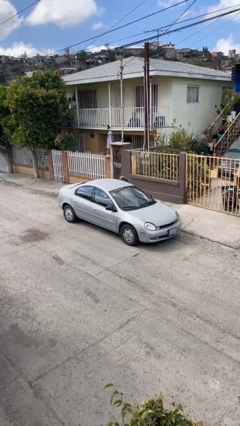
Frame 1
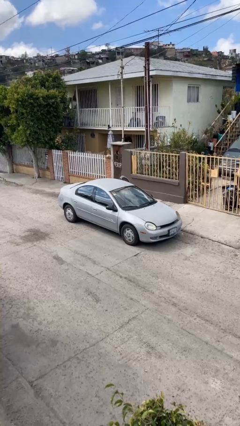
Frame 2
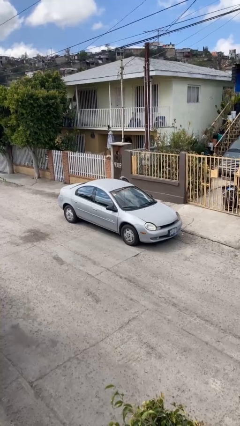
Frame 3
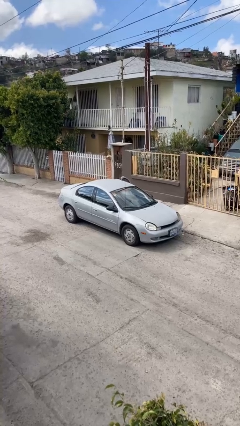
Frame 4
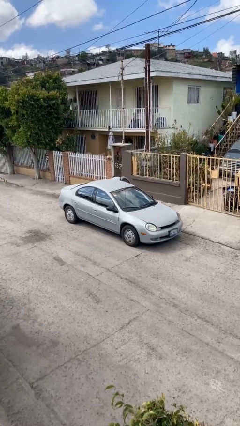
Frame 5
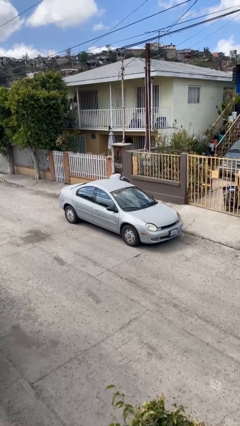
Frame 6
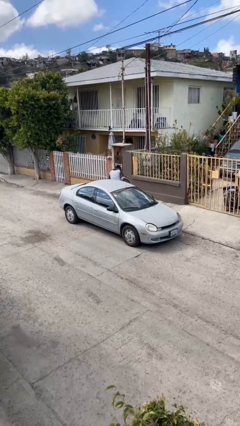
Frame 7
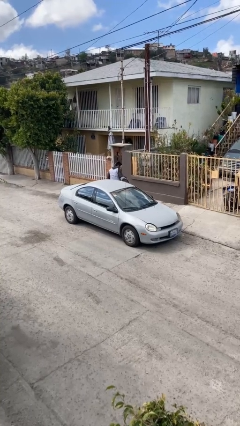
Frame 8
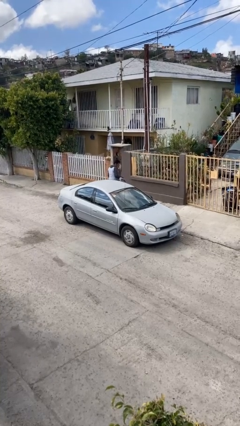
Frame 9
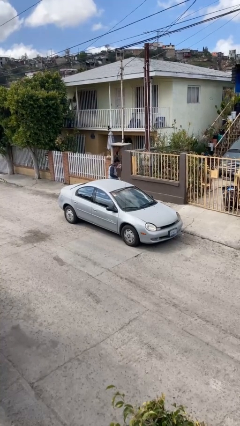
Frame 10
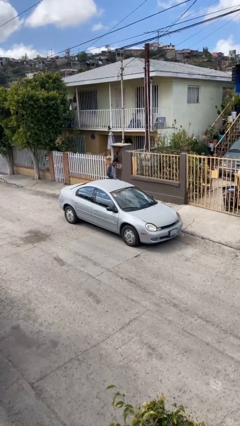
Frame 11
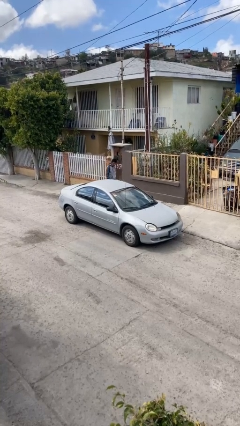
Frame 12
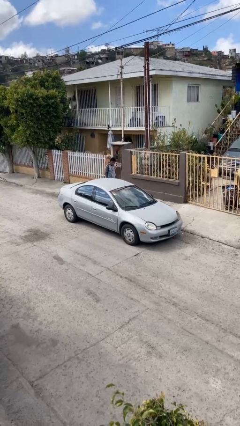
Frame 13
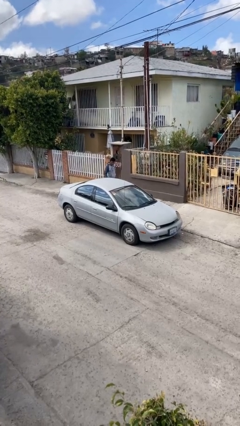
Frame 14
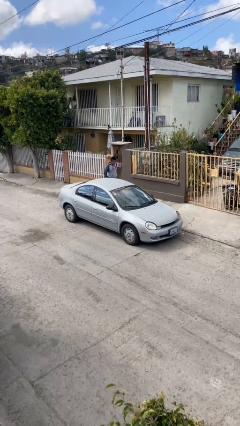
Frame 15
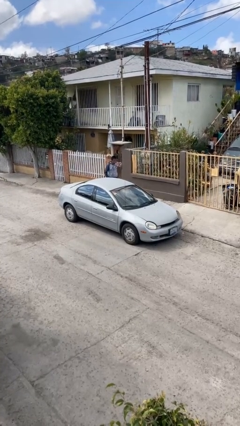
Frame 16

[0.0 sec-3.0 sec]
car drops off person

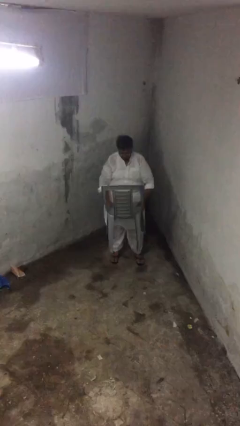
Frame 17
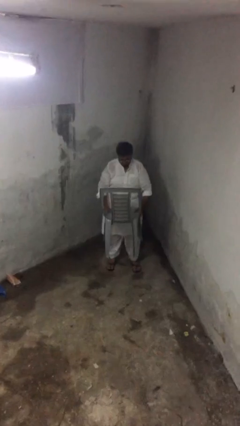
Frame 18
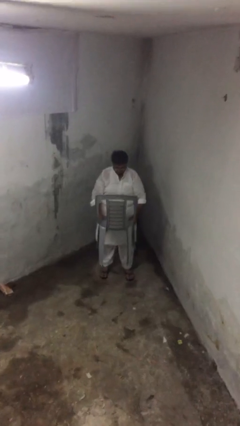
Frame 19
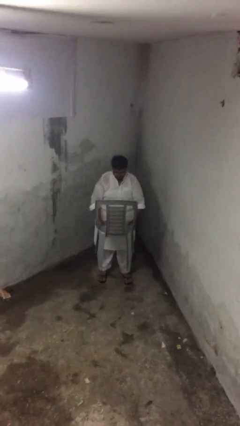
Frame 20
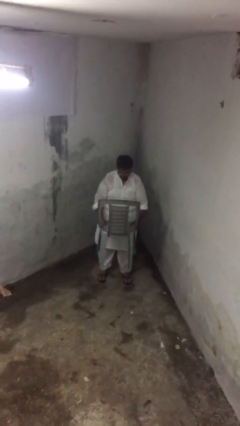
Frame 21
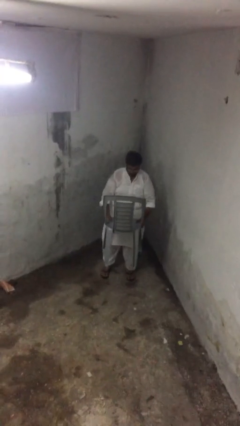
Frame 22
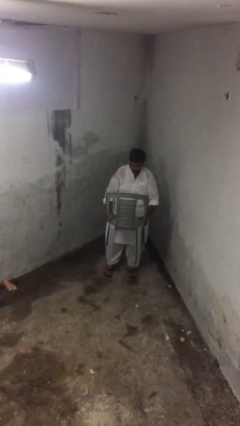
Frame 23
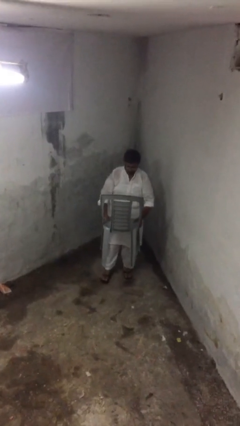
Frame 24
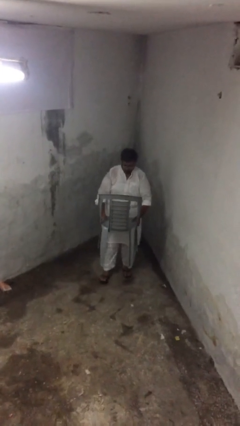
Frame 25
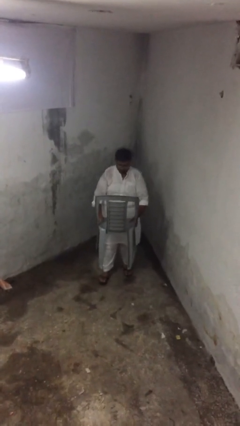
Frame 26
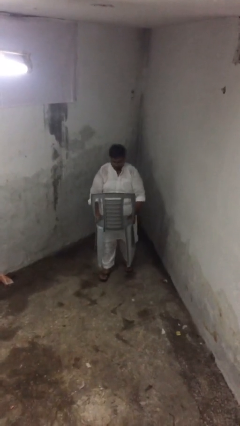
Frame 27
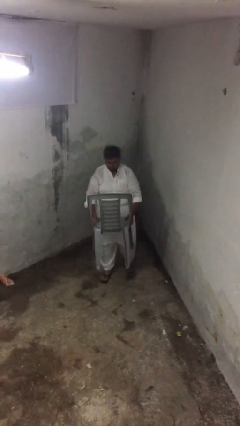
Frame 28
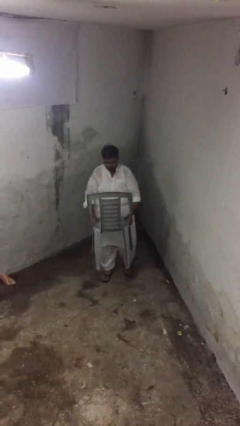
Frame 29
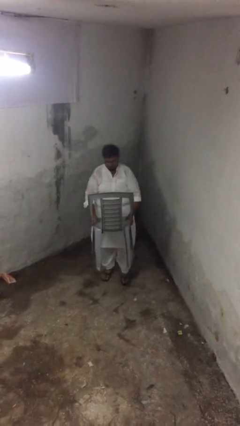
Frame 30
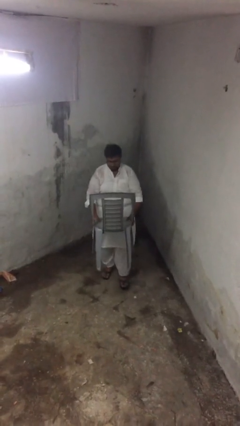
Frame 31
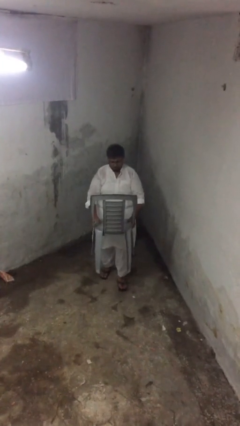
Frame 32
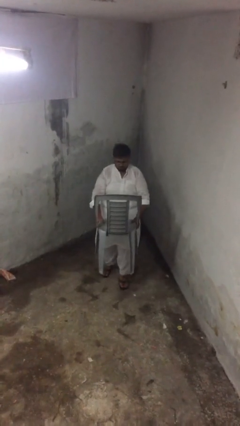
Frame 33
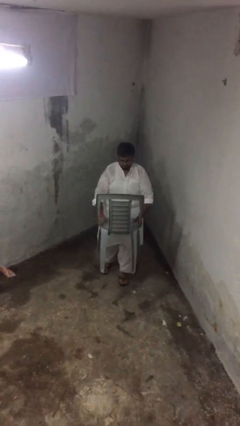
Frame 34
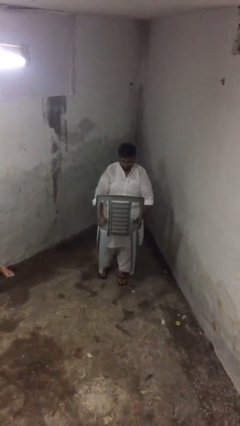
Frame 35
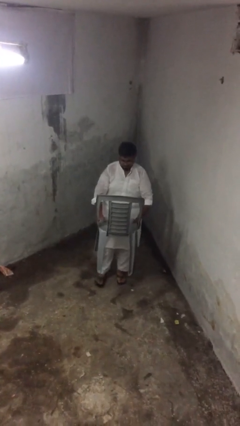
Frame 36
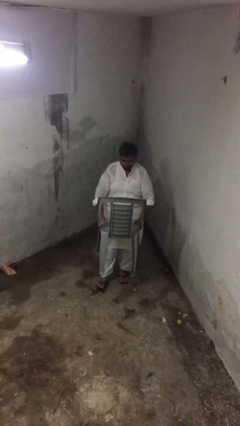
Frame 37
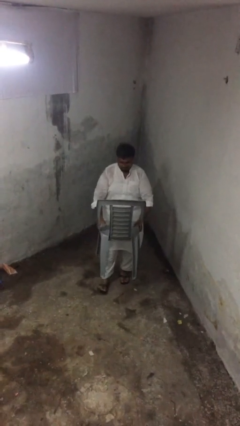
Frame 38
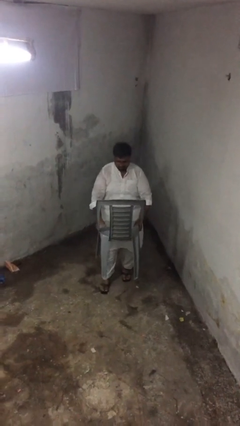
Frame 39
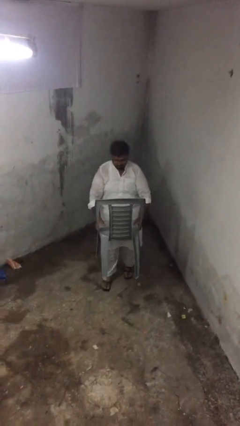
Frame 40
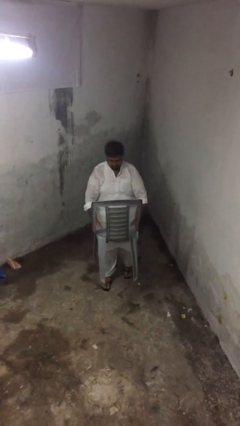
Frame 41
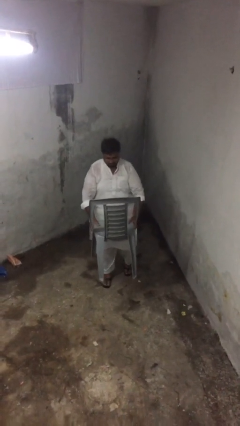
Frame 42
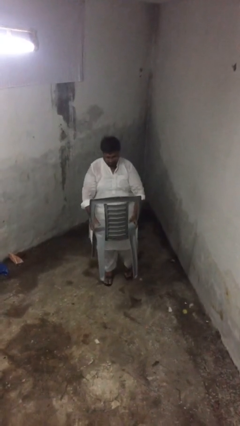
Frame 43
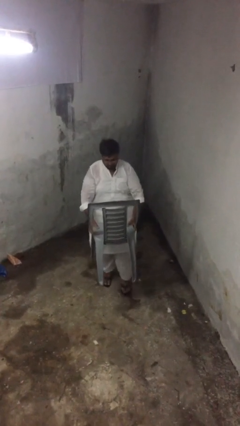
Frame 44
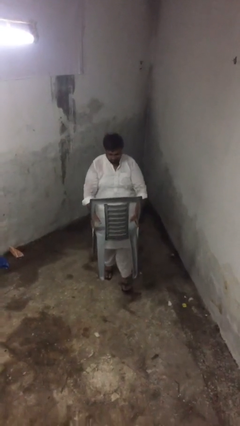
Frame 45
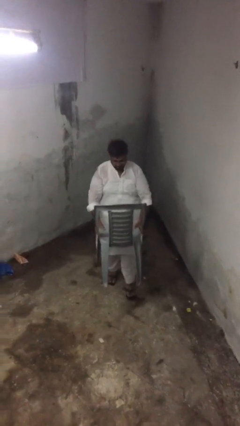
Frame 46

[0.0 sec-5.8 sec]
person carries heavy object

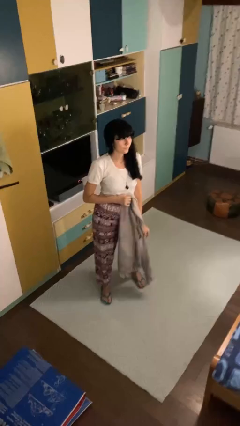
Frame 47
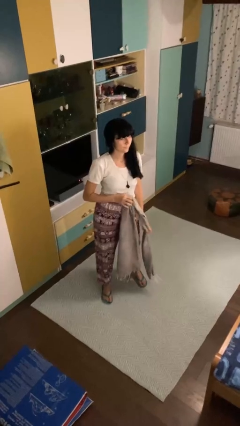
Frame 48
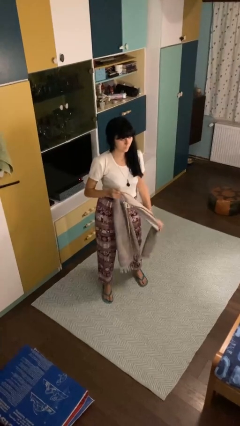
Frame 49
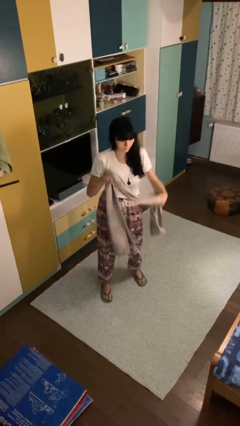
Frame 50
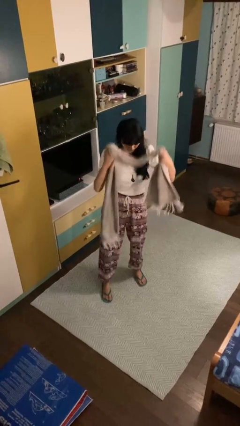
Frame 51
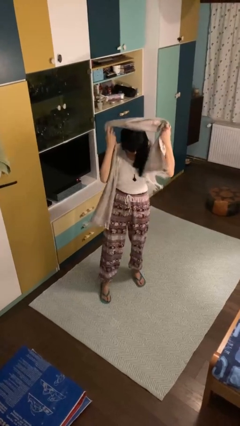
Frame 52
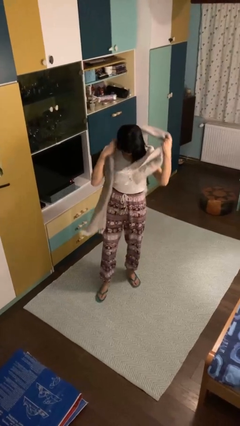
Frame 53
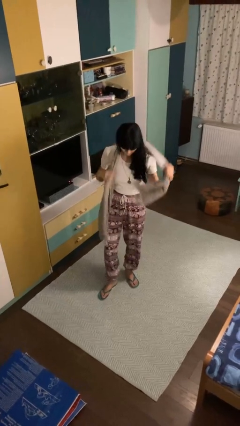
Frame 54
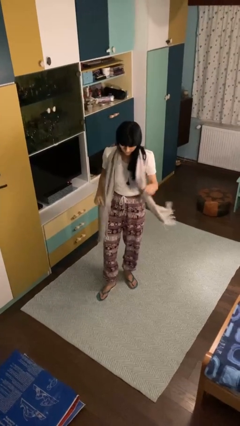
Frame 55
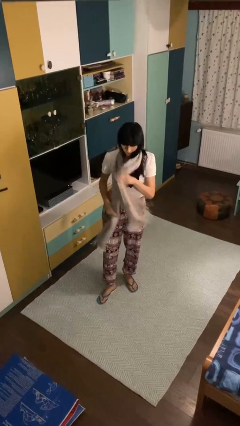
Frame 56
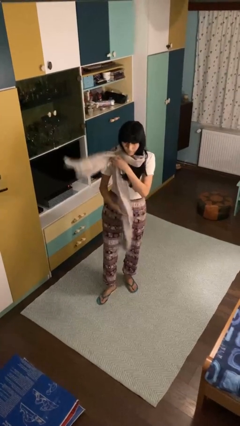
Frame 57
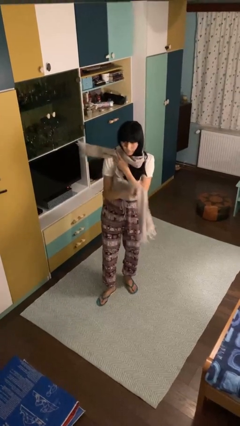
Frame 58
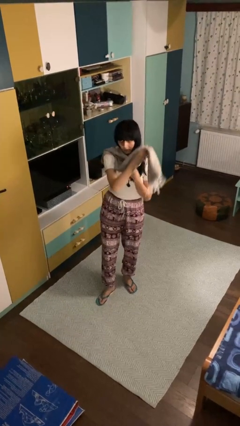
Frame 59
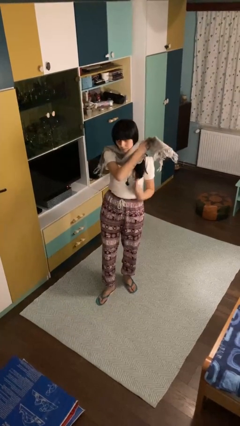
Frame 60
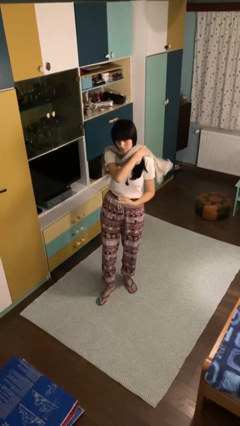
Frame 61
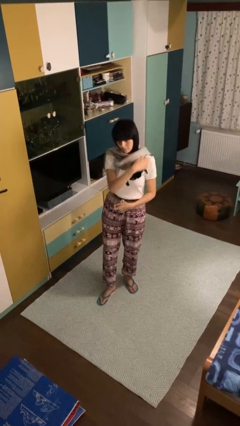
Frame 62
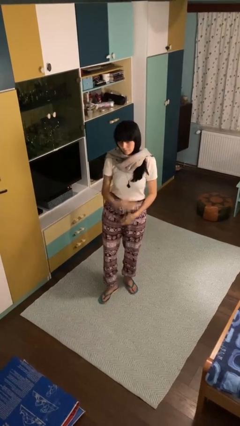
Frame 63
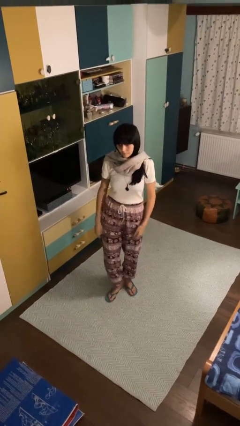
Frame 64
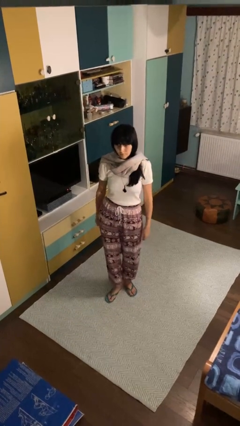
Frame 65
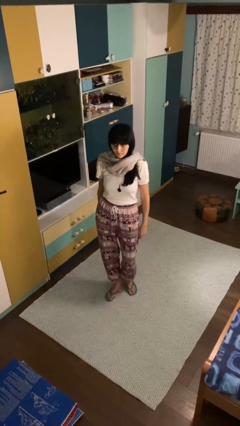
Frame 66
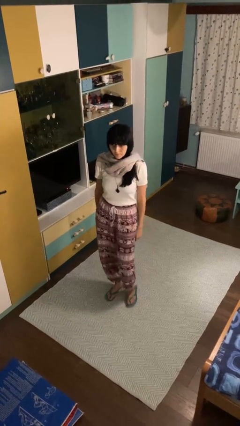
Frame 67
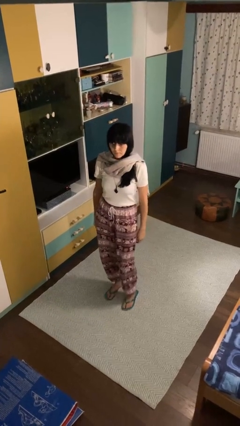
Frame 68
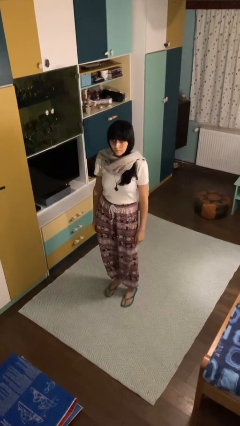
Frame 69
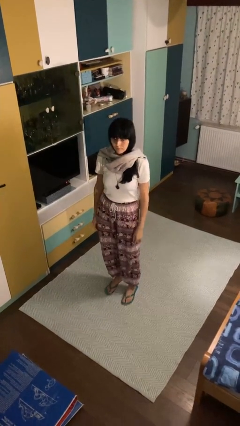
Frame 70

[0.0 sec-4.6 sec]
person puts on scarf

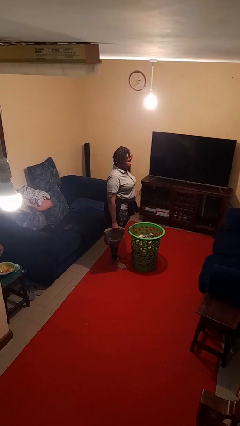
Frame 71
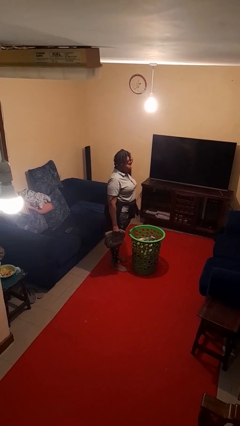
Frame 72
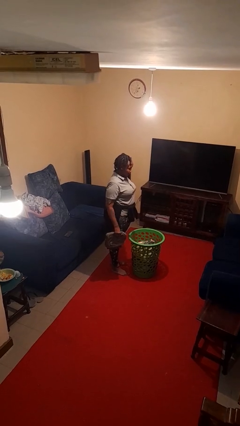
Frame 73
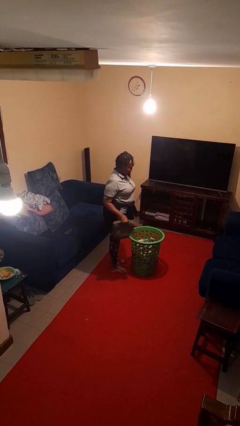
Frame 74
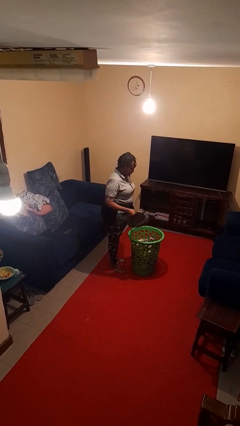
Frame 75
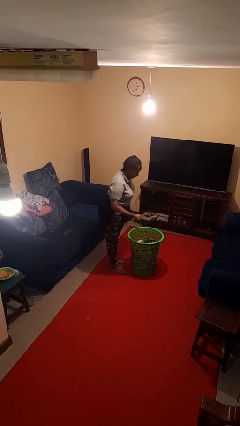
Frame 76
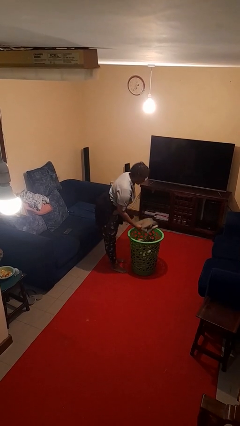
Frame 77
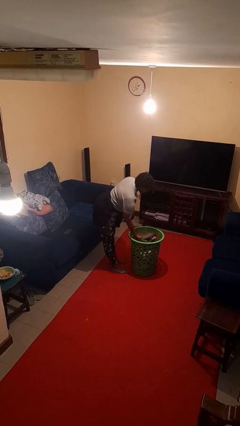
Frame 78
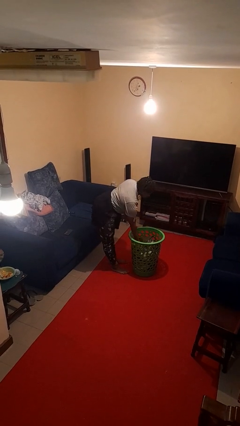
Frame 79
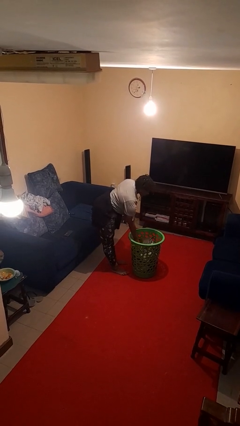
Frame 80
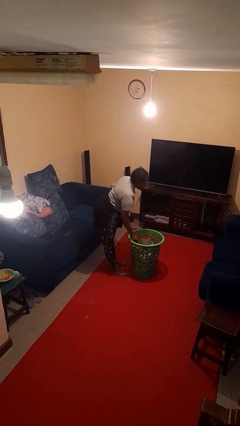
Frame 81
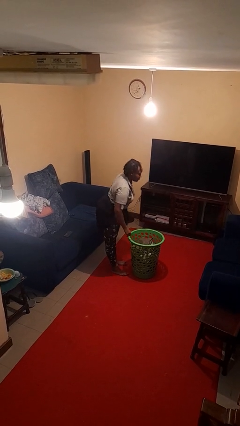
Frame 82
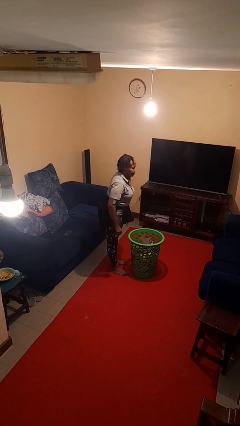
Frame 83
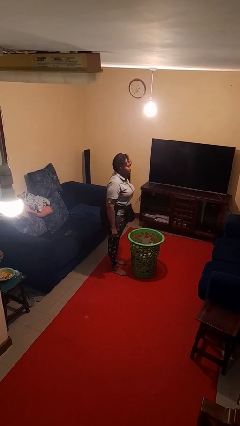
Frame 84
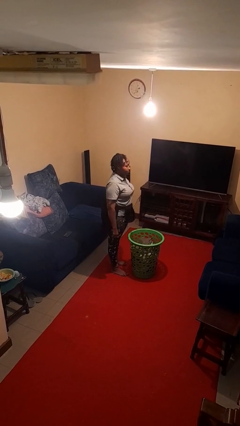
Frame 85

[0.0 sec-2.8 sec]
person puts object into basket

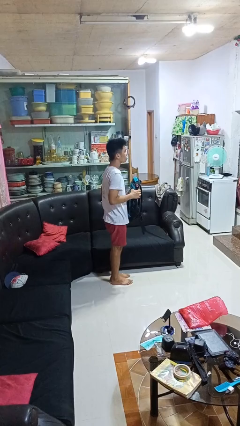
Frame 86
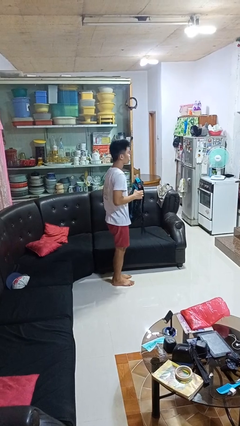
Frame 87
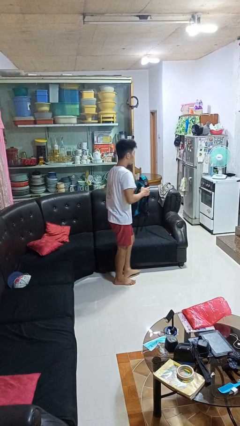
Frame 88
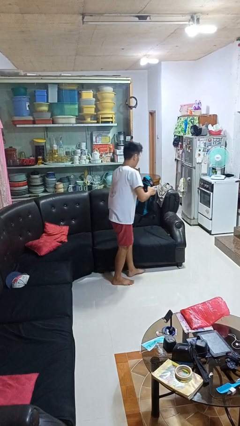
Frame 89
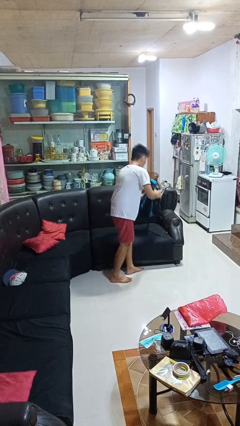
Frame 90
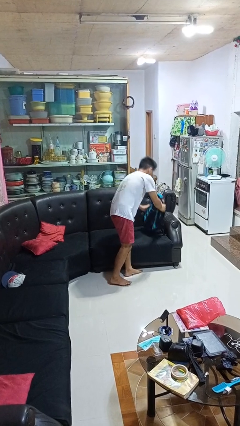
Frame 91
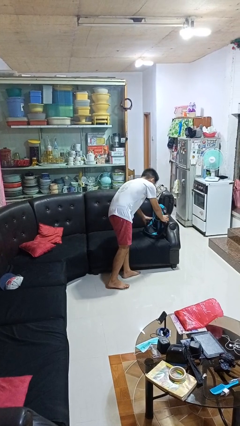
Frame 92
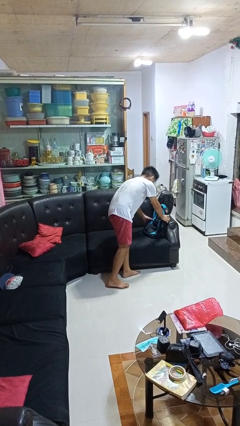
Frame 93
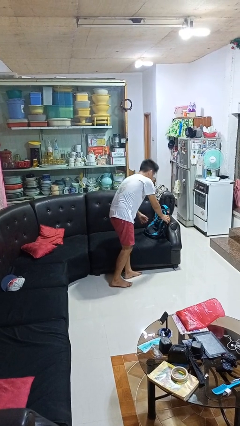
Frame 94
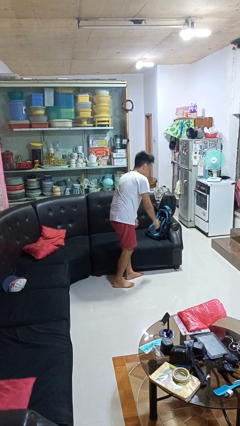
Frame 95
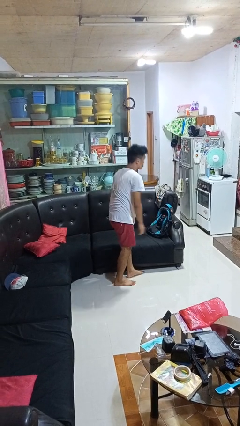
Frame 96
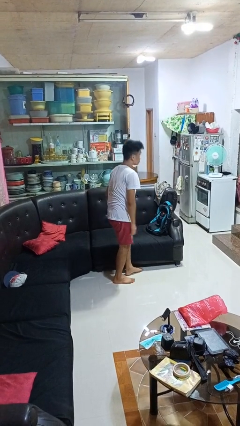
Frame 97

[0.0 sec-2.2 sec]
person puts down object on couch
